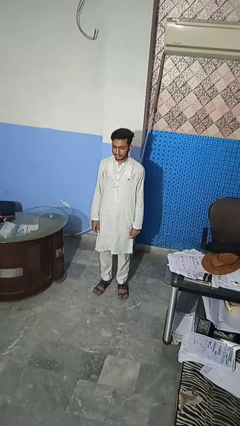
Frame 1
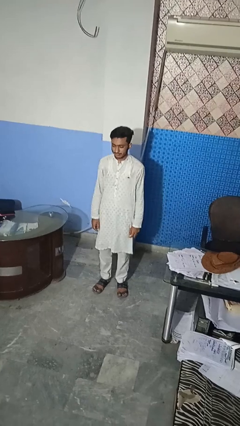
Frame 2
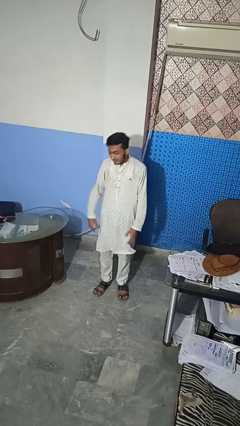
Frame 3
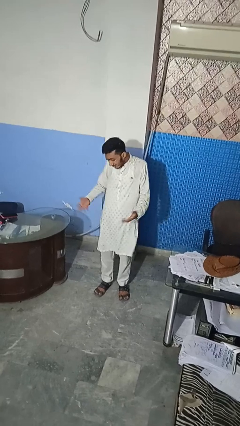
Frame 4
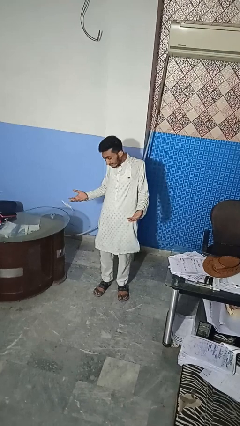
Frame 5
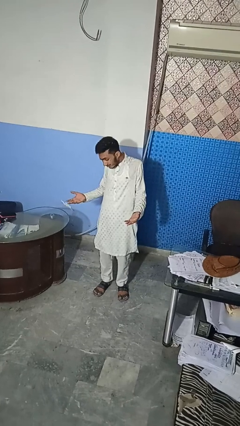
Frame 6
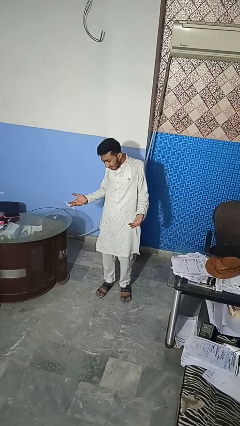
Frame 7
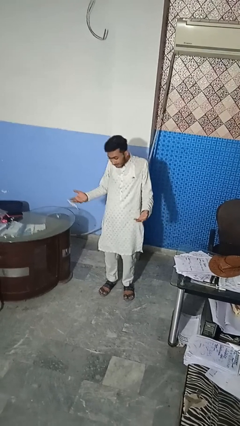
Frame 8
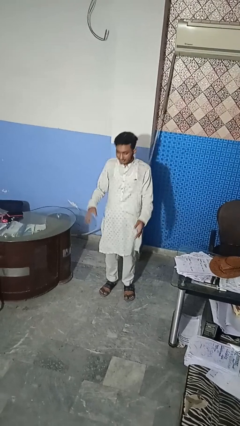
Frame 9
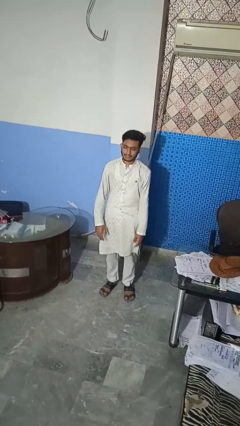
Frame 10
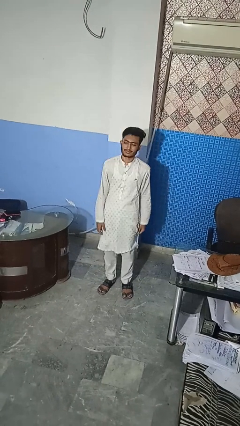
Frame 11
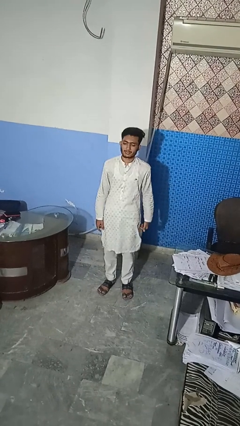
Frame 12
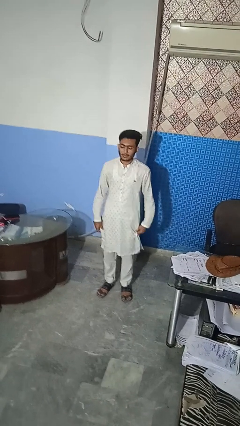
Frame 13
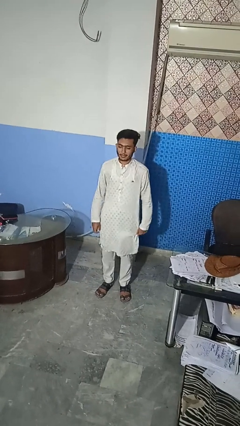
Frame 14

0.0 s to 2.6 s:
person shrugs

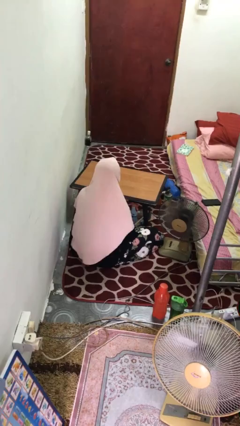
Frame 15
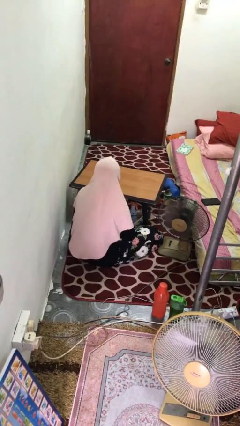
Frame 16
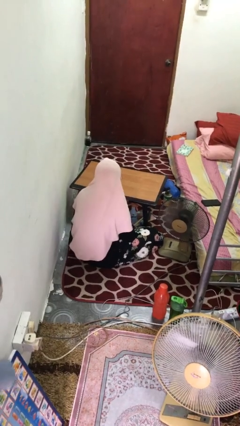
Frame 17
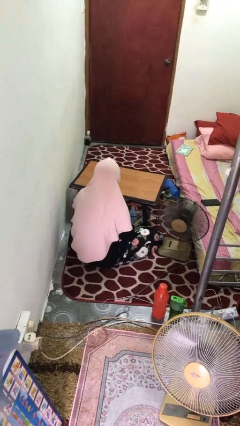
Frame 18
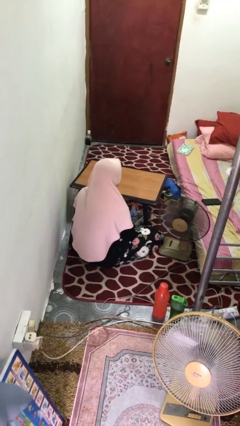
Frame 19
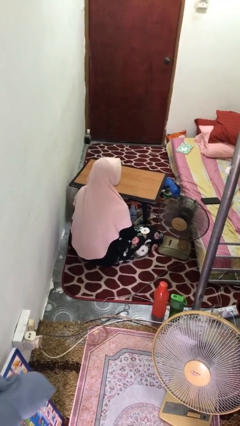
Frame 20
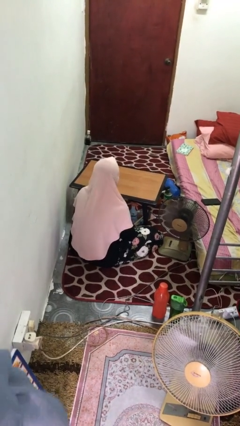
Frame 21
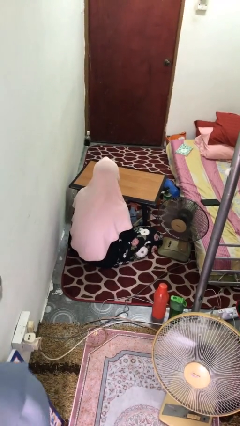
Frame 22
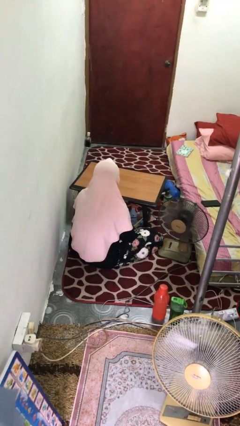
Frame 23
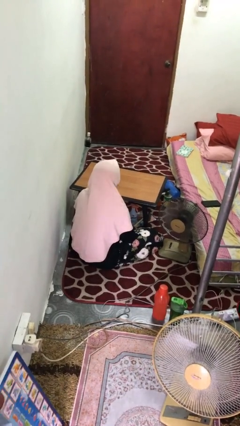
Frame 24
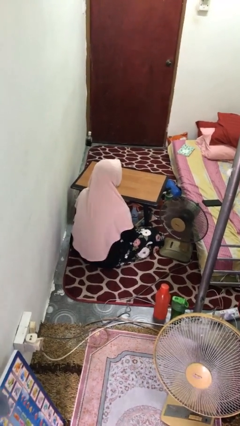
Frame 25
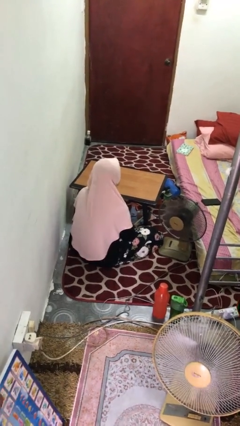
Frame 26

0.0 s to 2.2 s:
person shakes head

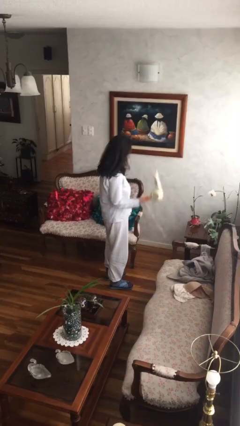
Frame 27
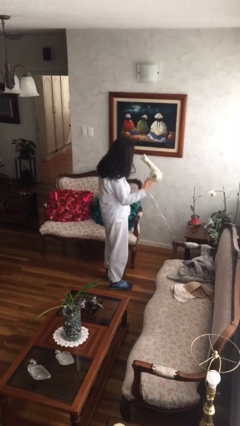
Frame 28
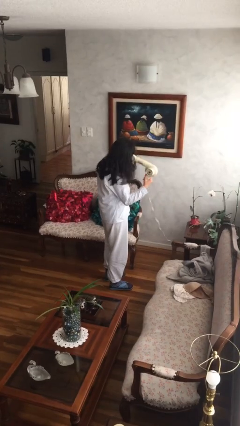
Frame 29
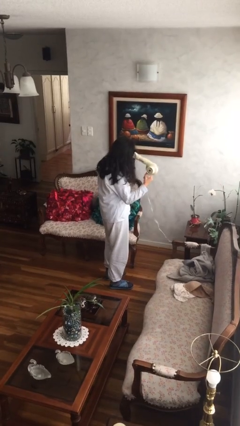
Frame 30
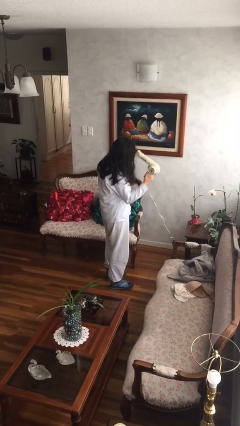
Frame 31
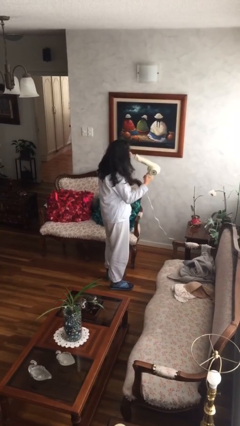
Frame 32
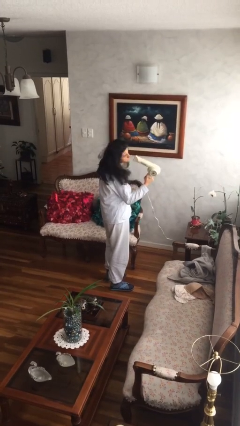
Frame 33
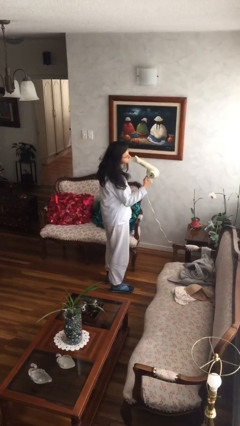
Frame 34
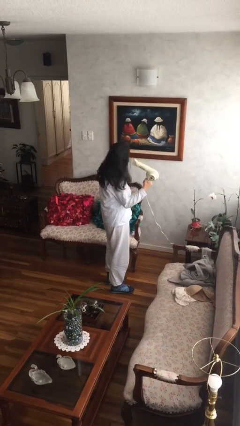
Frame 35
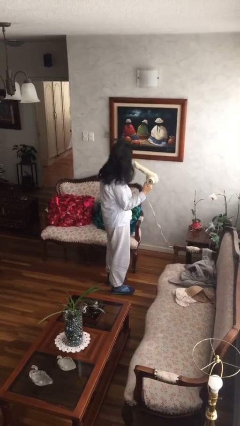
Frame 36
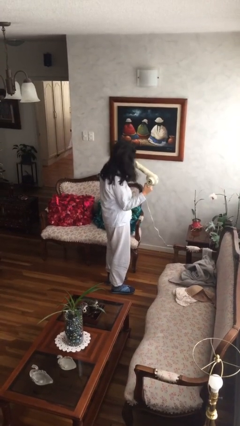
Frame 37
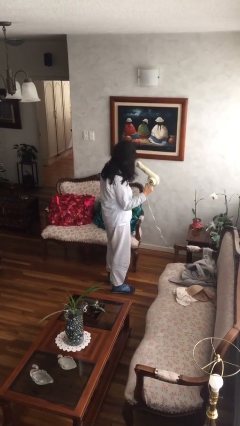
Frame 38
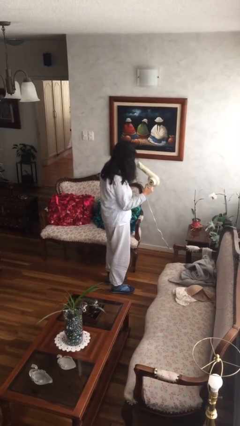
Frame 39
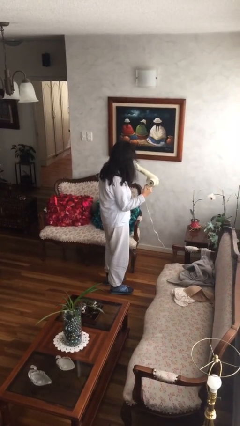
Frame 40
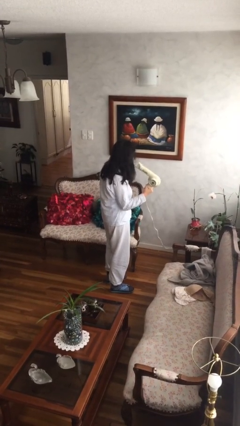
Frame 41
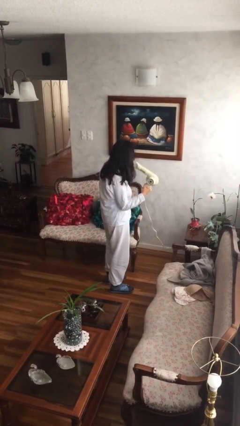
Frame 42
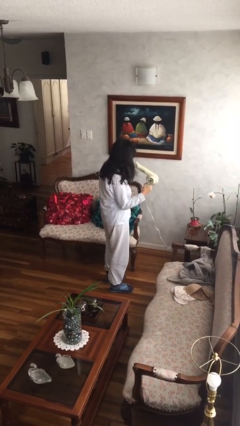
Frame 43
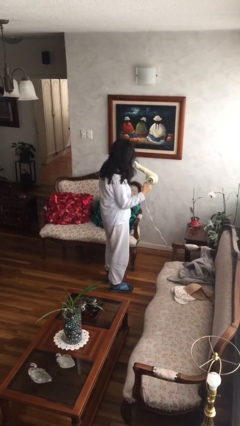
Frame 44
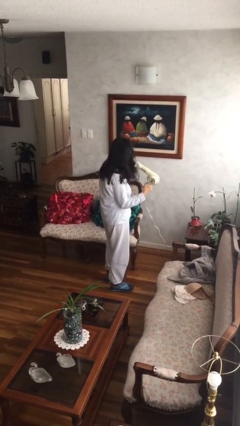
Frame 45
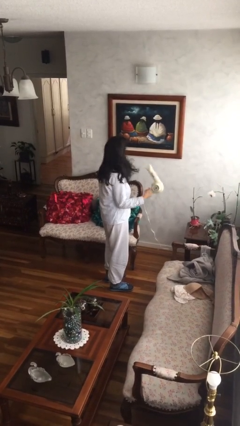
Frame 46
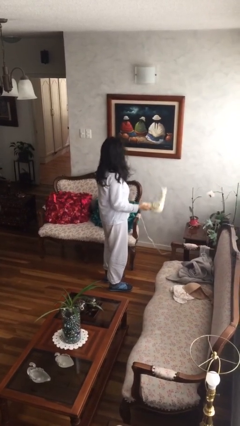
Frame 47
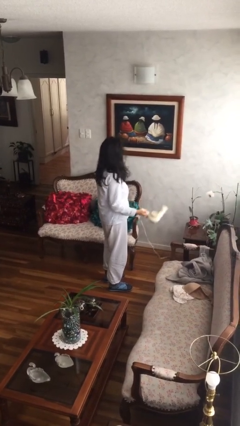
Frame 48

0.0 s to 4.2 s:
person dries hair with hairdryer

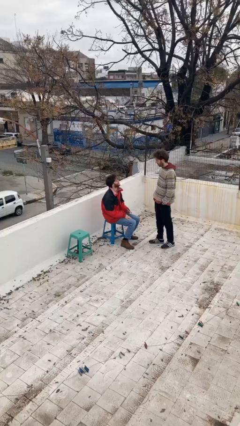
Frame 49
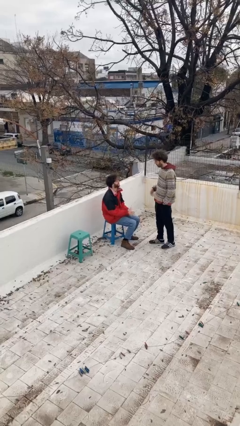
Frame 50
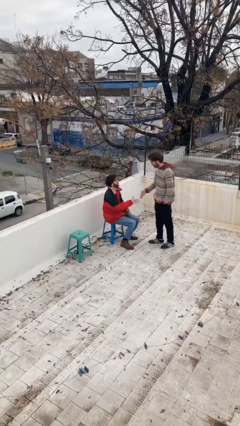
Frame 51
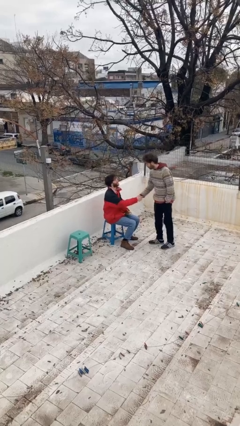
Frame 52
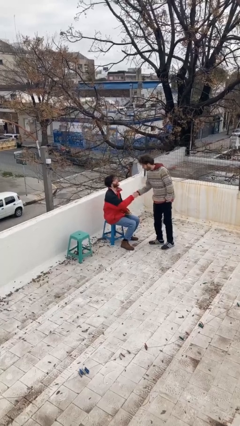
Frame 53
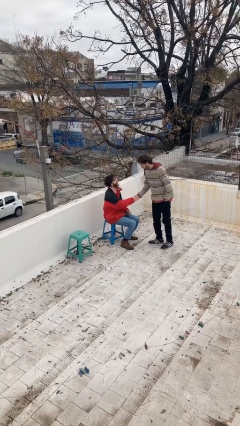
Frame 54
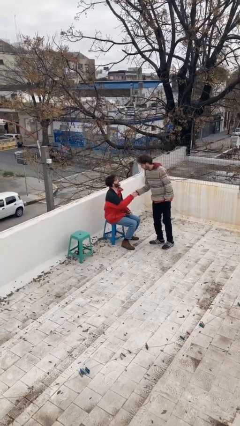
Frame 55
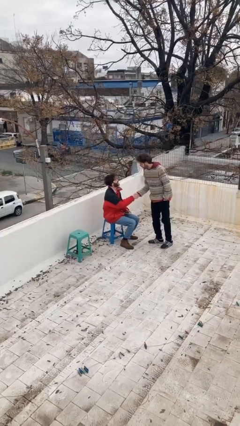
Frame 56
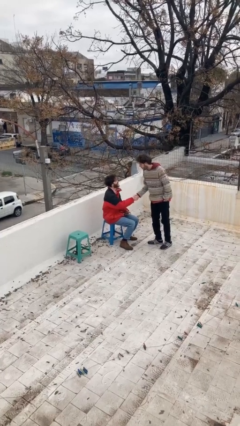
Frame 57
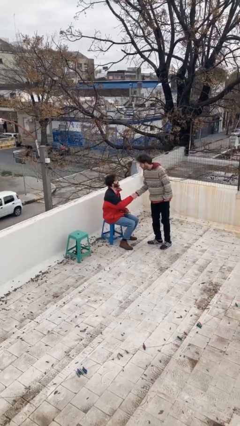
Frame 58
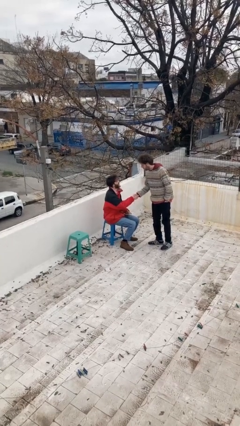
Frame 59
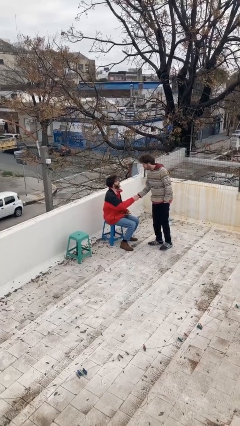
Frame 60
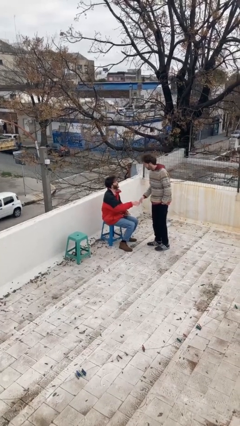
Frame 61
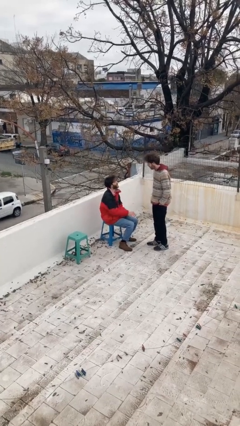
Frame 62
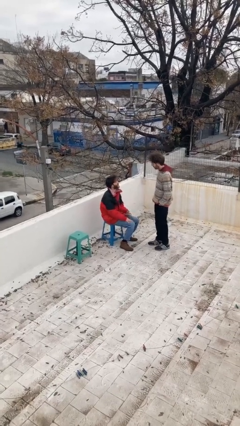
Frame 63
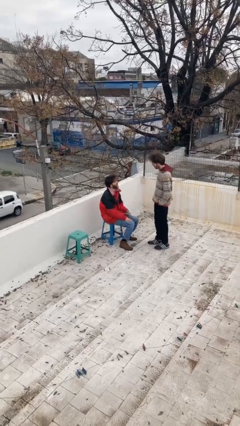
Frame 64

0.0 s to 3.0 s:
person shakes hand

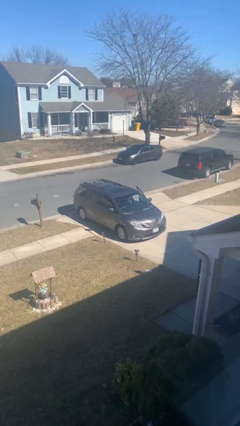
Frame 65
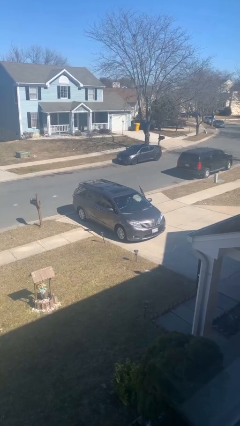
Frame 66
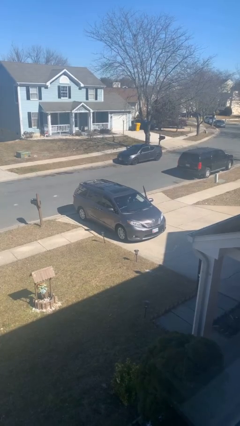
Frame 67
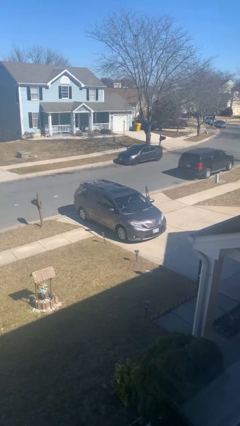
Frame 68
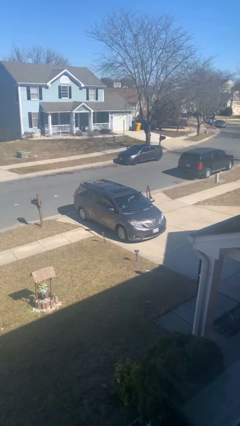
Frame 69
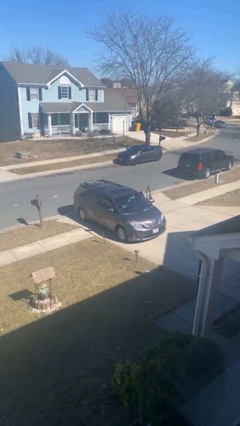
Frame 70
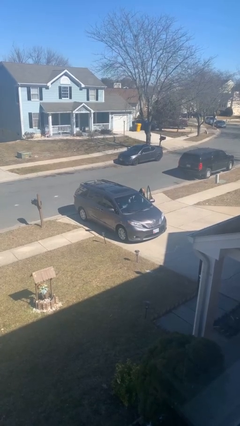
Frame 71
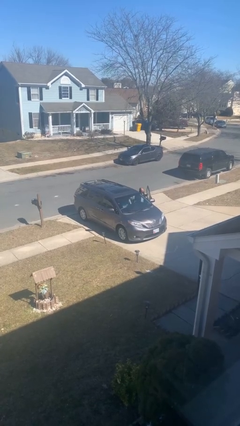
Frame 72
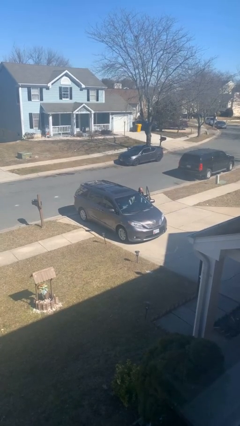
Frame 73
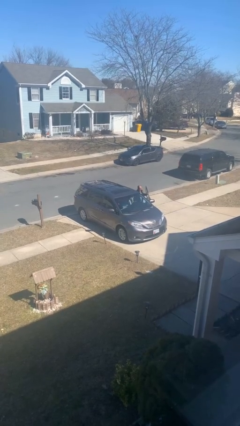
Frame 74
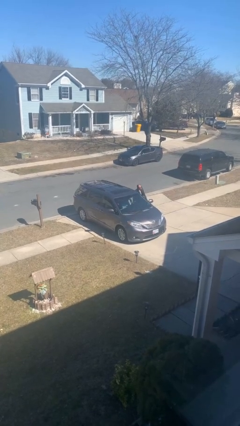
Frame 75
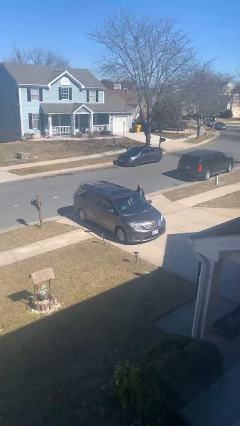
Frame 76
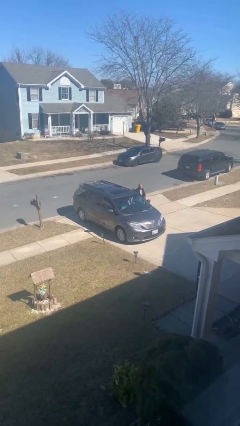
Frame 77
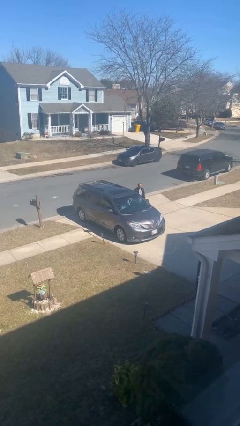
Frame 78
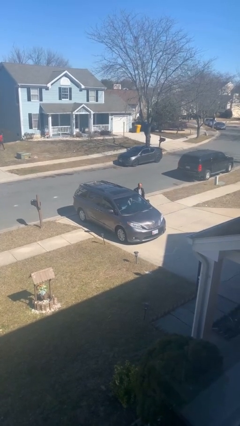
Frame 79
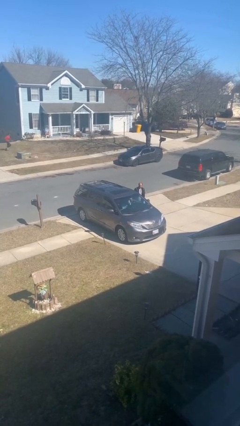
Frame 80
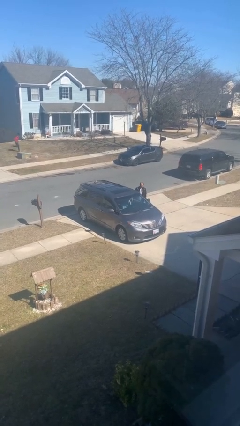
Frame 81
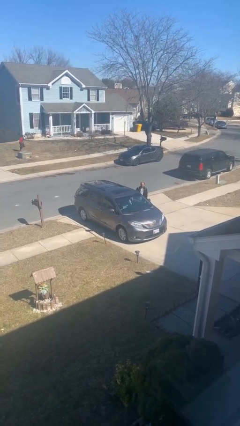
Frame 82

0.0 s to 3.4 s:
car drops off person

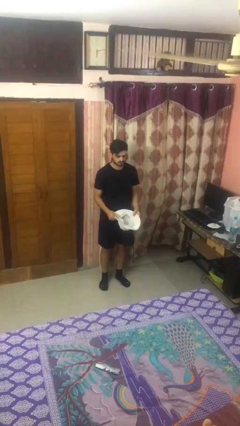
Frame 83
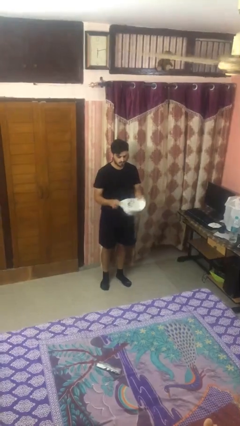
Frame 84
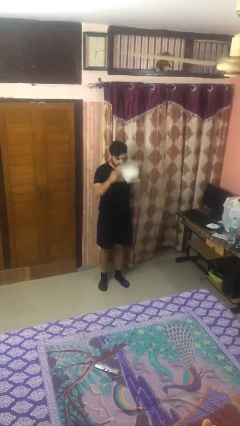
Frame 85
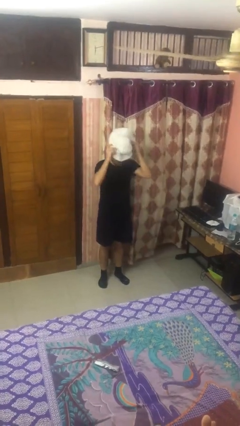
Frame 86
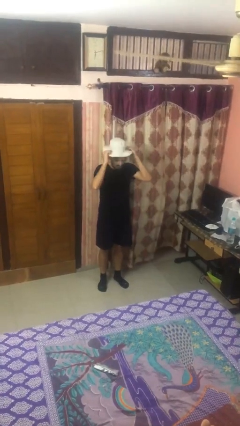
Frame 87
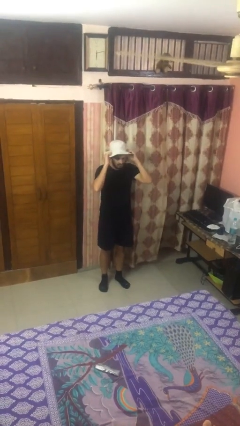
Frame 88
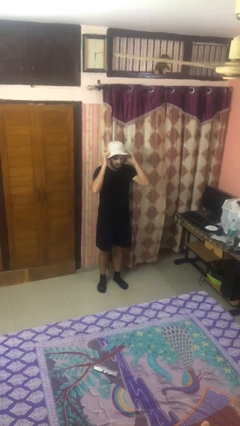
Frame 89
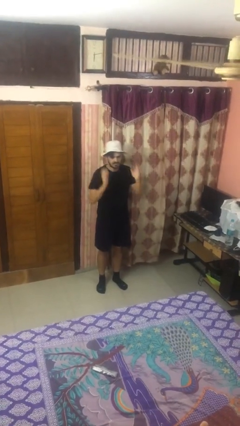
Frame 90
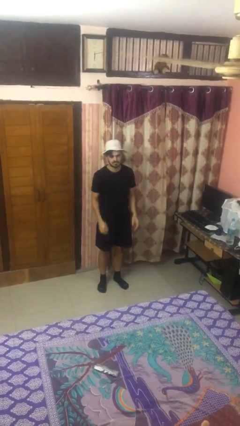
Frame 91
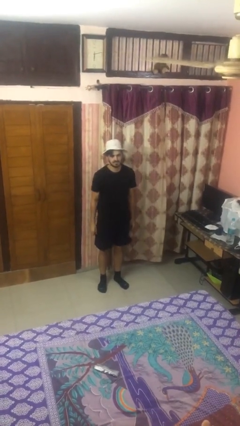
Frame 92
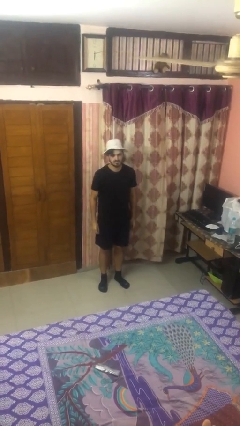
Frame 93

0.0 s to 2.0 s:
person puts on hat
